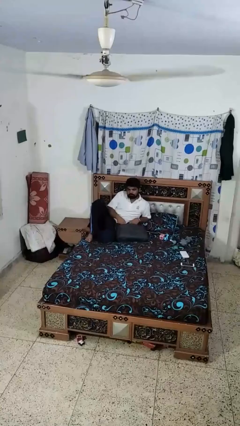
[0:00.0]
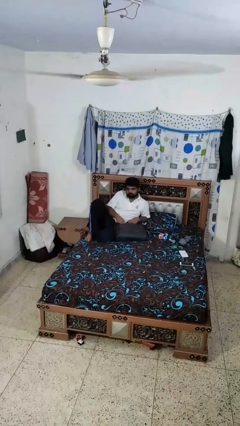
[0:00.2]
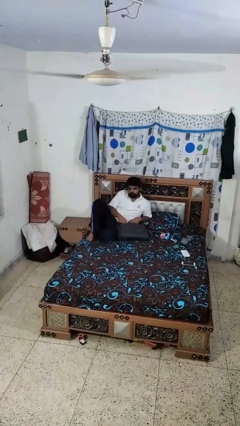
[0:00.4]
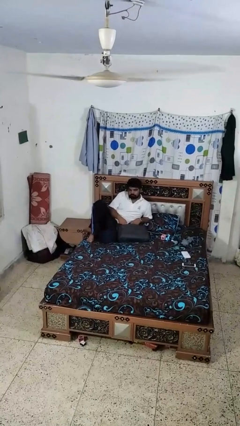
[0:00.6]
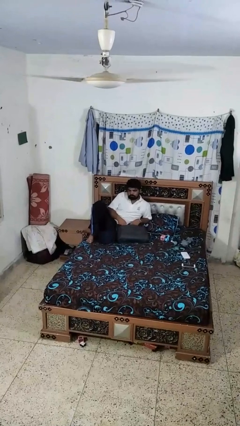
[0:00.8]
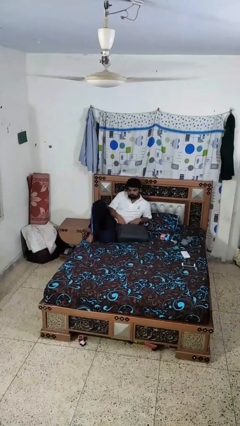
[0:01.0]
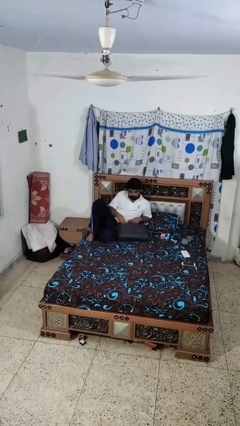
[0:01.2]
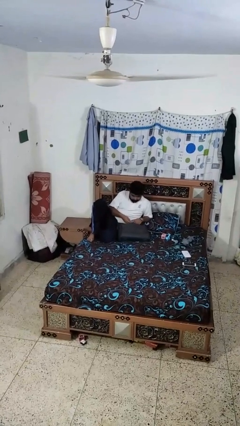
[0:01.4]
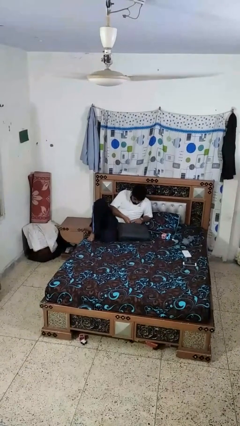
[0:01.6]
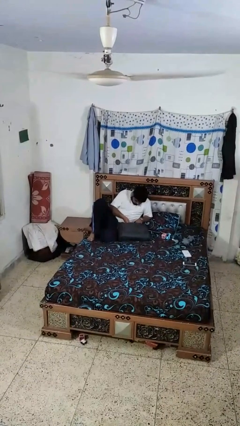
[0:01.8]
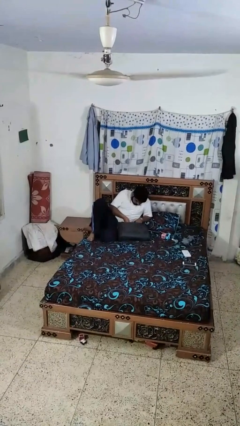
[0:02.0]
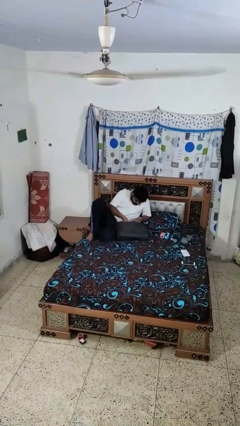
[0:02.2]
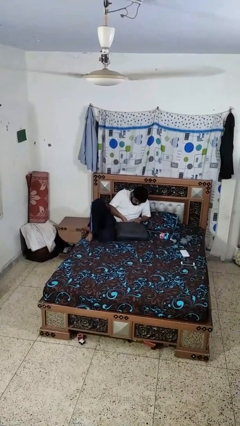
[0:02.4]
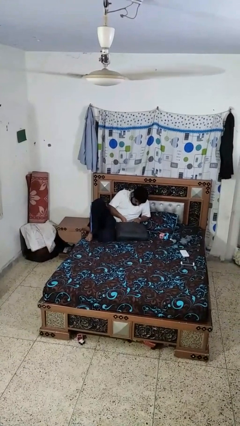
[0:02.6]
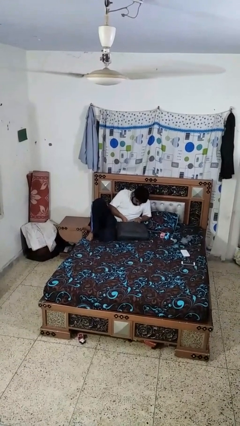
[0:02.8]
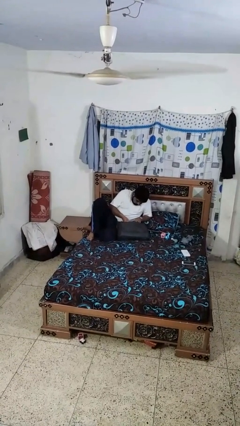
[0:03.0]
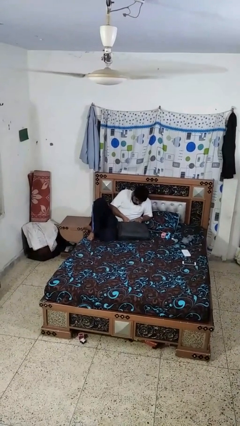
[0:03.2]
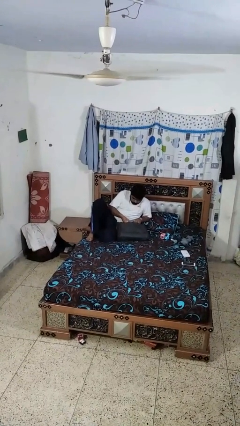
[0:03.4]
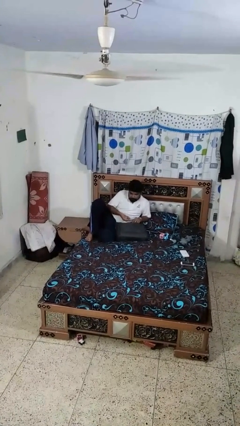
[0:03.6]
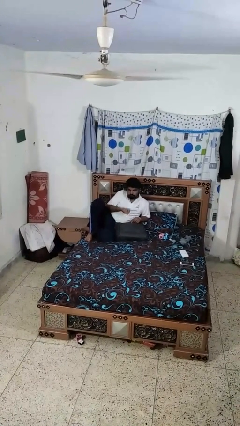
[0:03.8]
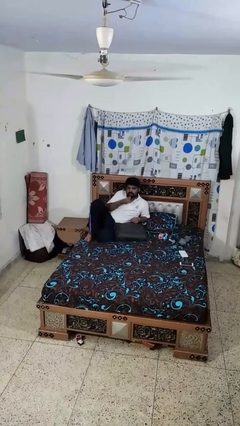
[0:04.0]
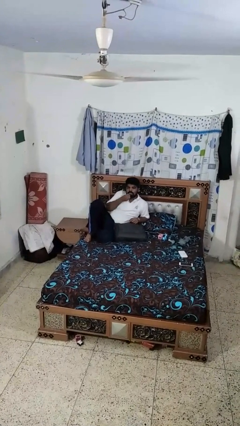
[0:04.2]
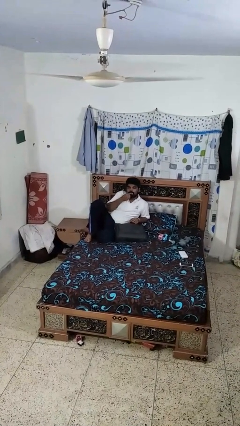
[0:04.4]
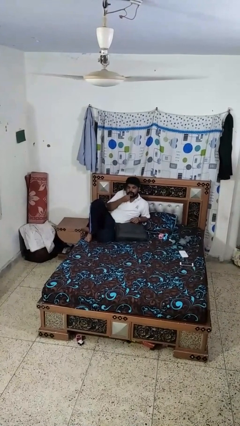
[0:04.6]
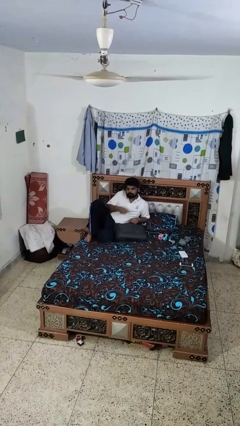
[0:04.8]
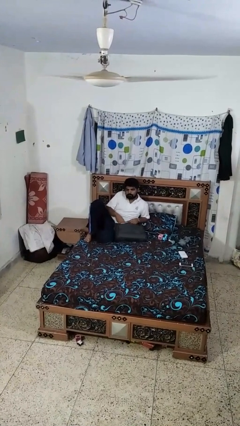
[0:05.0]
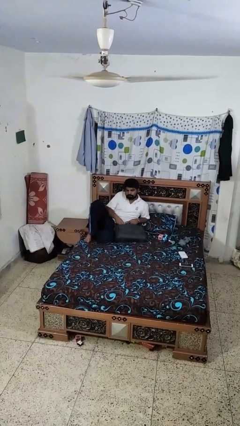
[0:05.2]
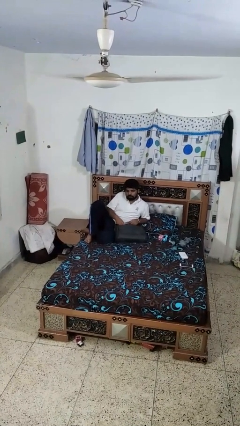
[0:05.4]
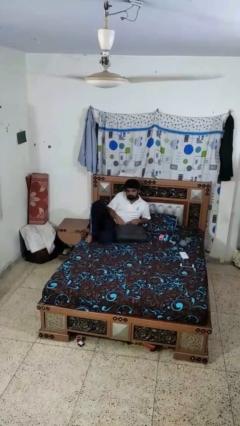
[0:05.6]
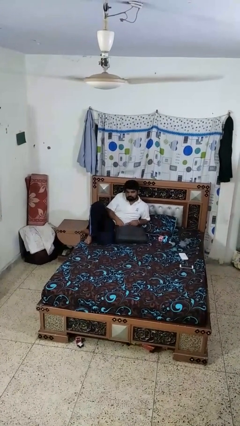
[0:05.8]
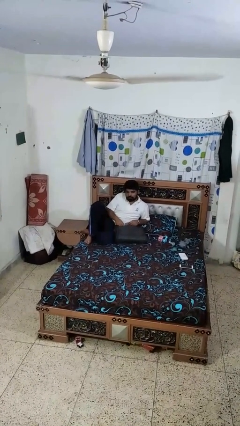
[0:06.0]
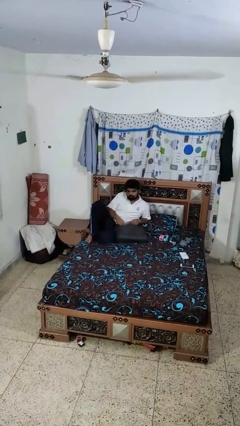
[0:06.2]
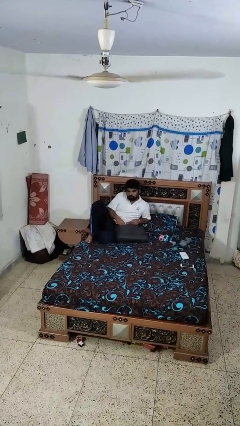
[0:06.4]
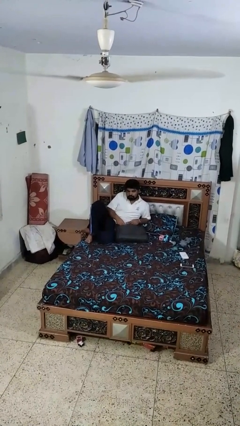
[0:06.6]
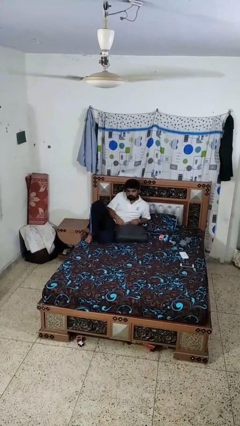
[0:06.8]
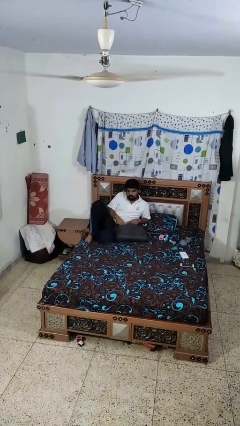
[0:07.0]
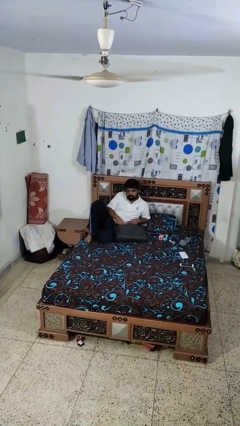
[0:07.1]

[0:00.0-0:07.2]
person eats snack from bag

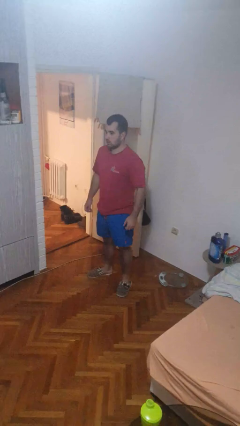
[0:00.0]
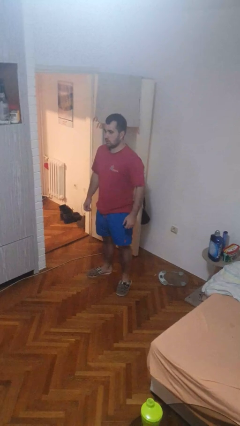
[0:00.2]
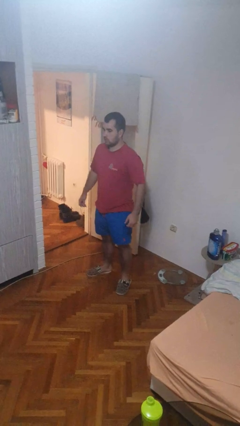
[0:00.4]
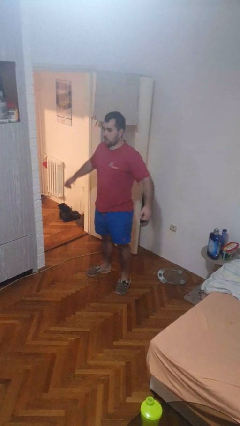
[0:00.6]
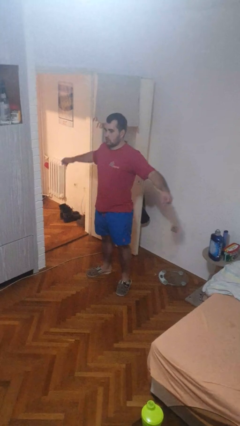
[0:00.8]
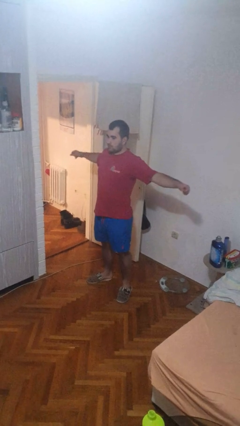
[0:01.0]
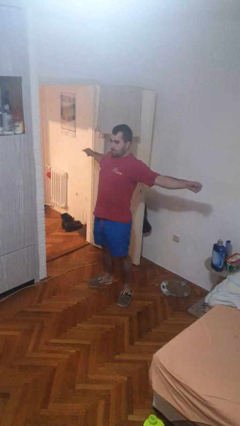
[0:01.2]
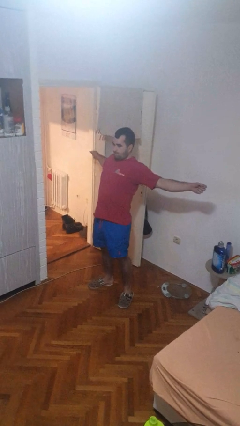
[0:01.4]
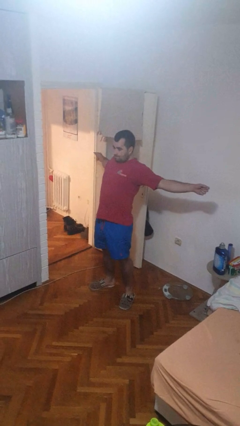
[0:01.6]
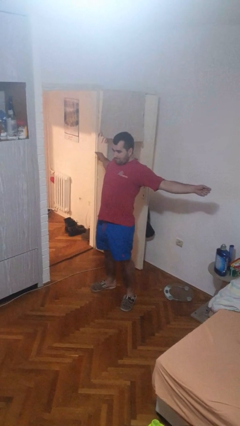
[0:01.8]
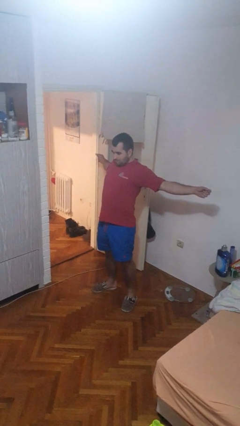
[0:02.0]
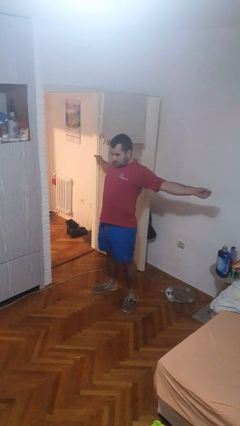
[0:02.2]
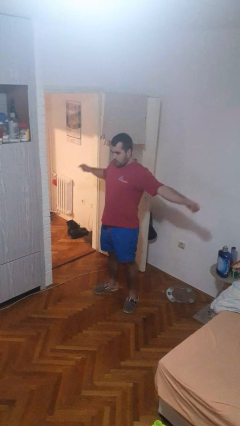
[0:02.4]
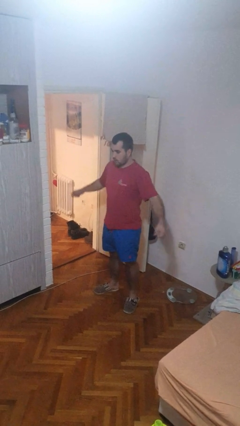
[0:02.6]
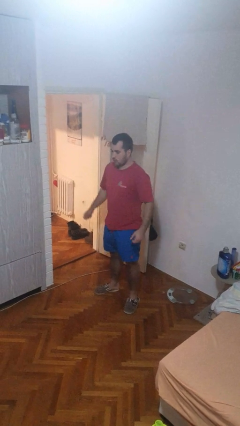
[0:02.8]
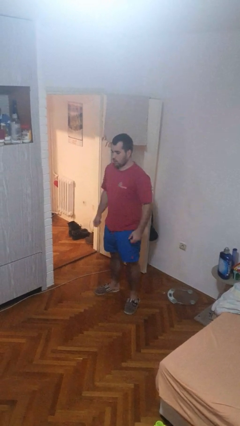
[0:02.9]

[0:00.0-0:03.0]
person stretches arms to side

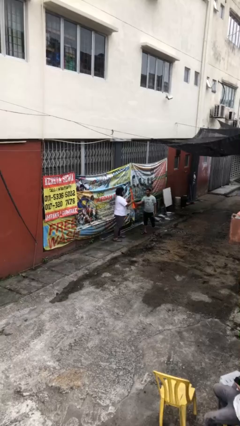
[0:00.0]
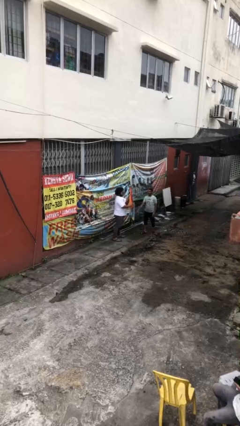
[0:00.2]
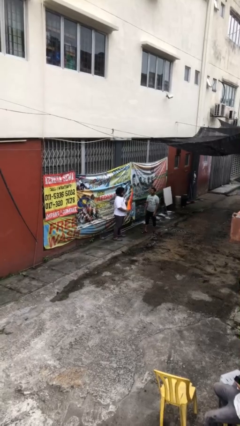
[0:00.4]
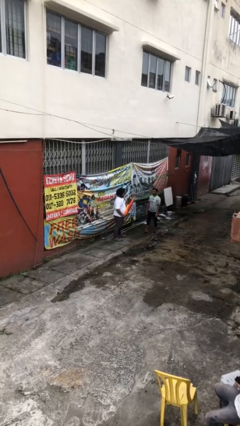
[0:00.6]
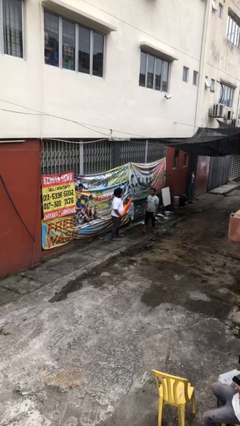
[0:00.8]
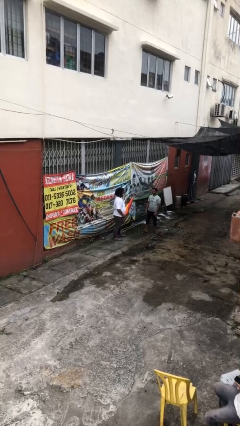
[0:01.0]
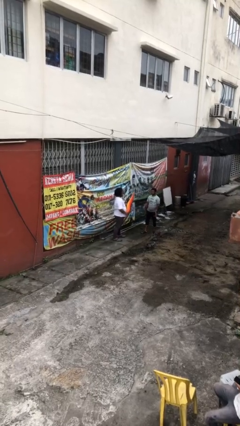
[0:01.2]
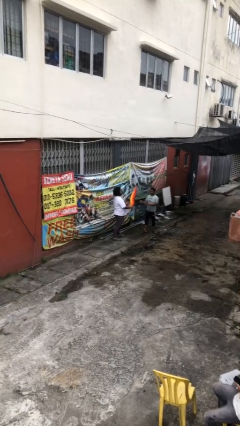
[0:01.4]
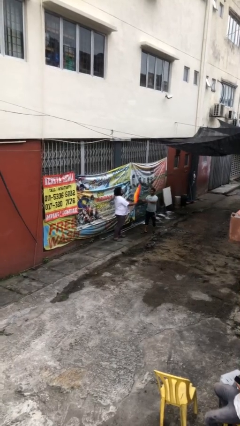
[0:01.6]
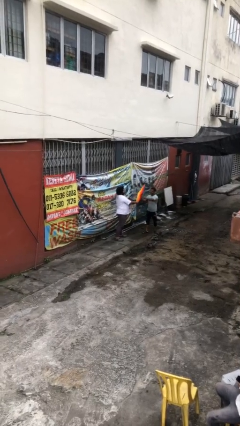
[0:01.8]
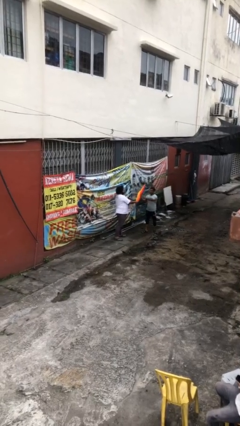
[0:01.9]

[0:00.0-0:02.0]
person transfers object to person

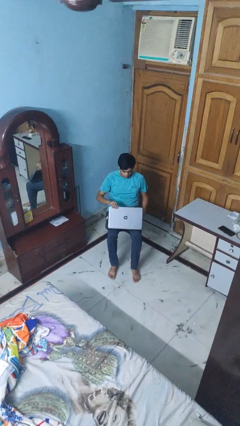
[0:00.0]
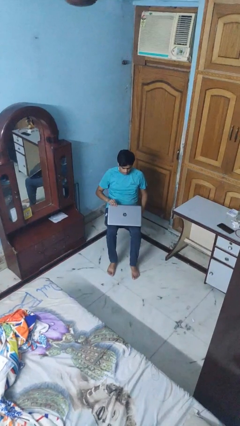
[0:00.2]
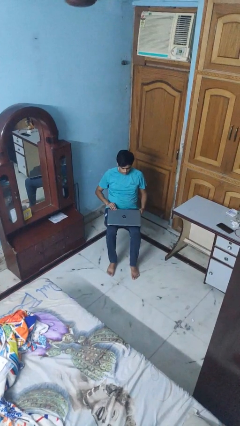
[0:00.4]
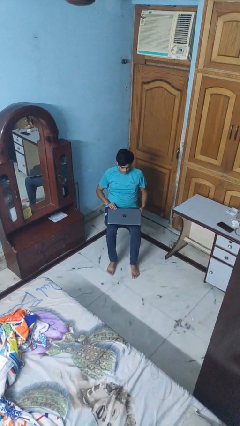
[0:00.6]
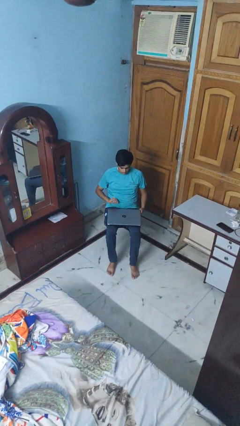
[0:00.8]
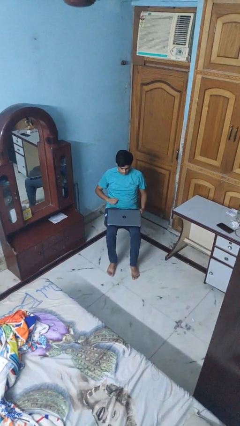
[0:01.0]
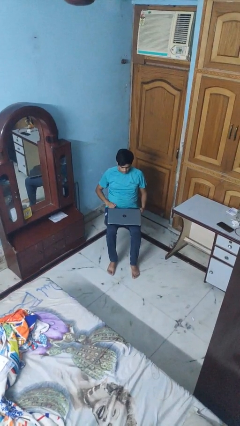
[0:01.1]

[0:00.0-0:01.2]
person closes laptop

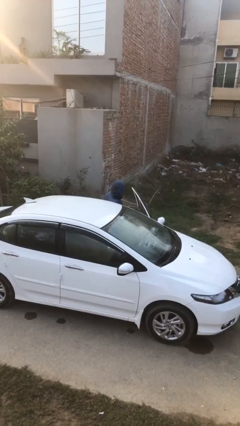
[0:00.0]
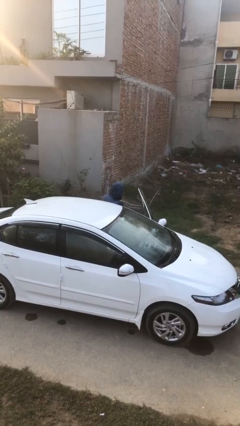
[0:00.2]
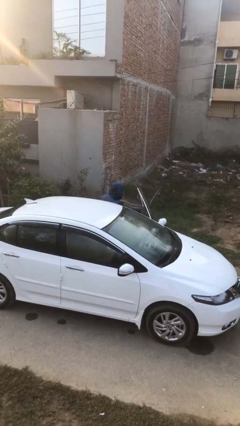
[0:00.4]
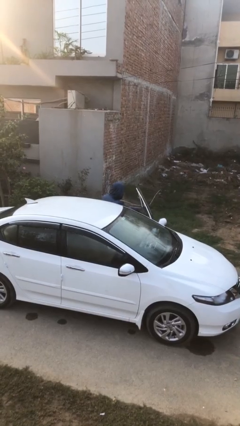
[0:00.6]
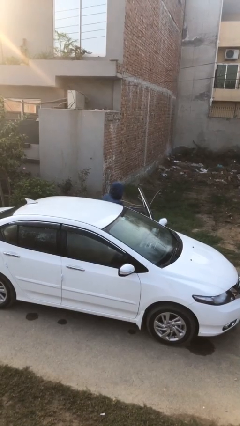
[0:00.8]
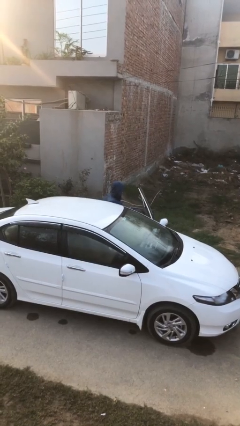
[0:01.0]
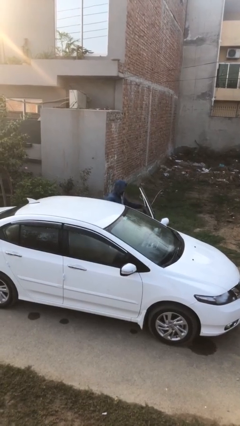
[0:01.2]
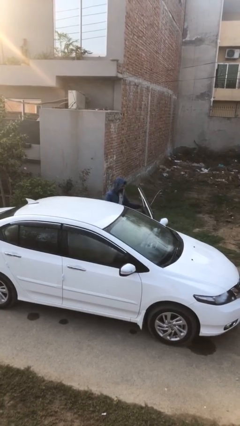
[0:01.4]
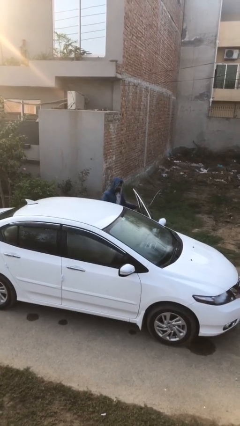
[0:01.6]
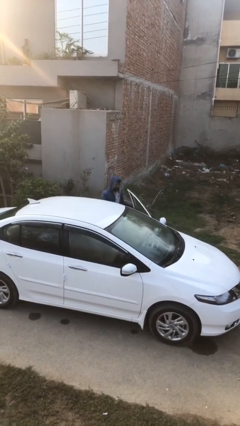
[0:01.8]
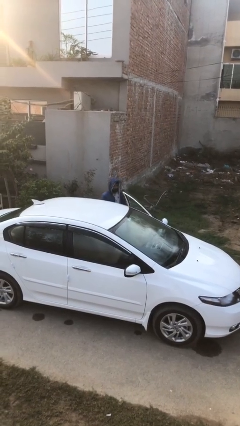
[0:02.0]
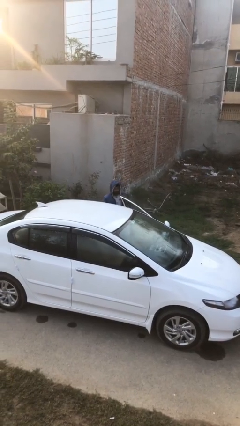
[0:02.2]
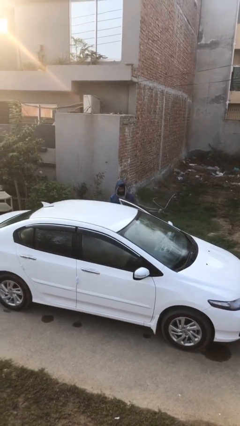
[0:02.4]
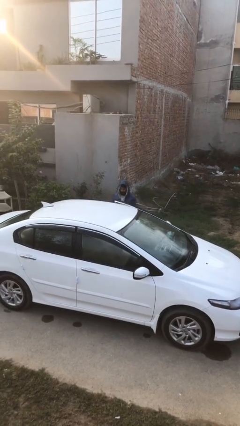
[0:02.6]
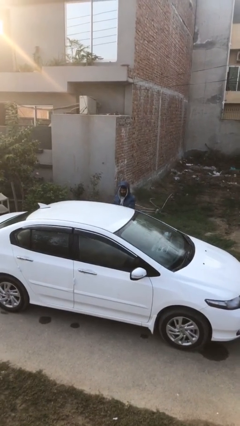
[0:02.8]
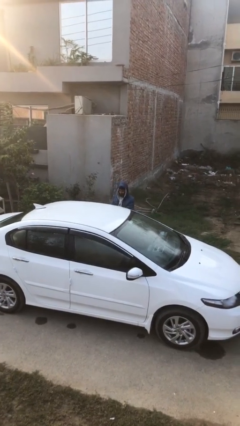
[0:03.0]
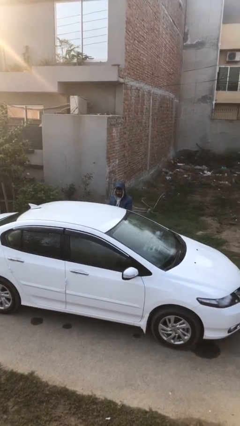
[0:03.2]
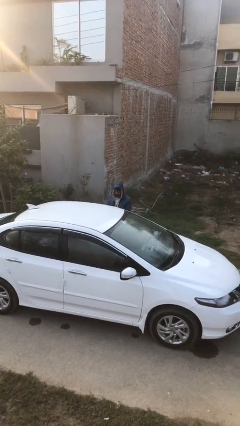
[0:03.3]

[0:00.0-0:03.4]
person closes car door

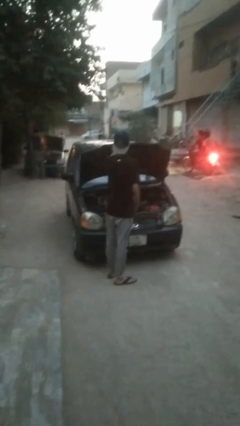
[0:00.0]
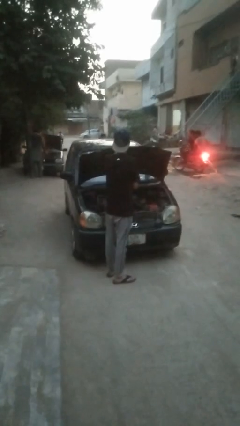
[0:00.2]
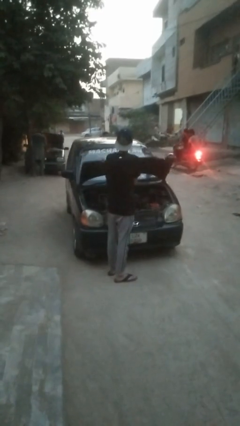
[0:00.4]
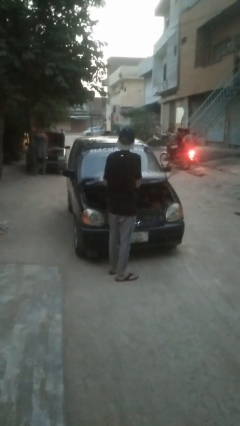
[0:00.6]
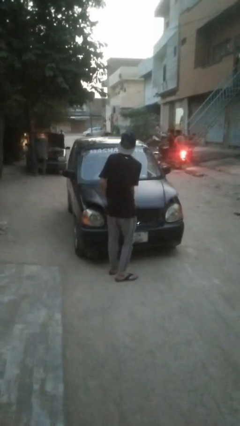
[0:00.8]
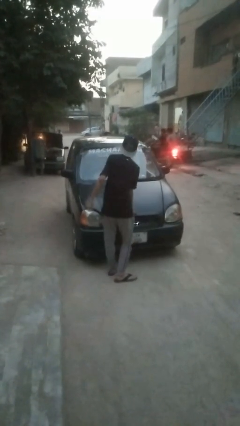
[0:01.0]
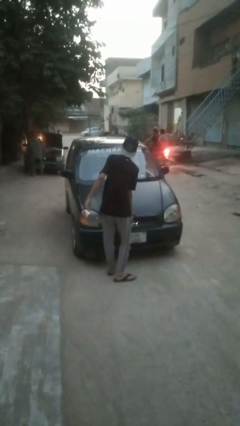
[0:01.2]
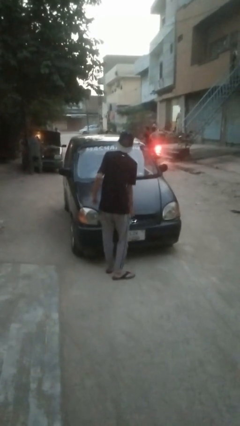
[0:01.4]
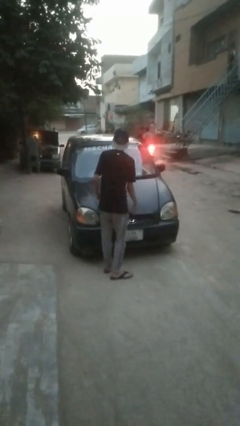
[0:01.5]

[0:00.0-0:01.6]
person closes car hood
